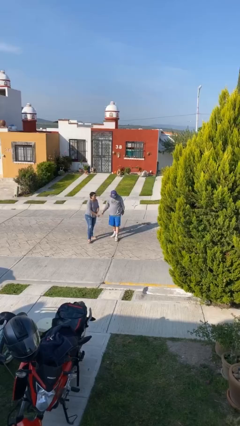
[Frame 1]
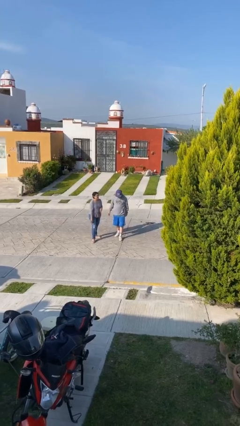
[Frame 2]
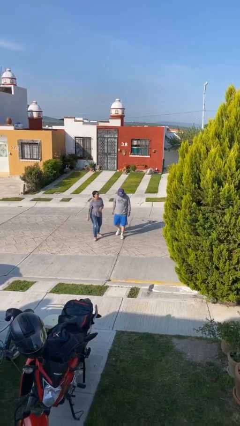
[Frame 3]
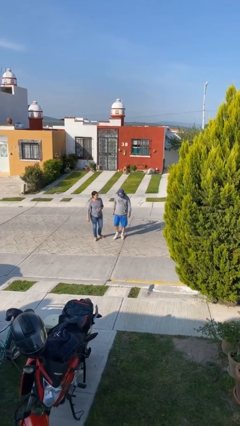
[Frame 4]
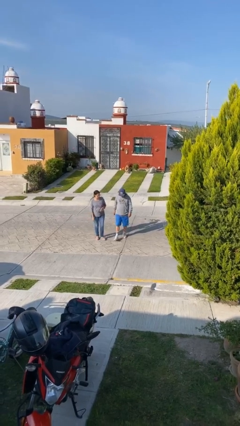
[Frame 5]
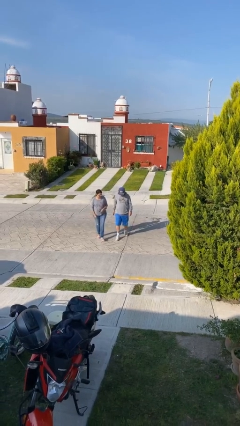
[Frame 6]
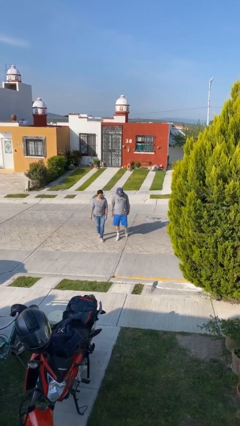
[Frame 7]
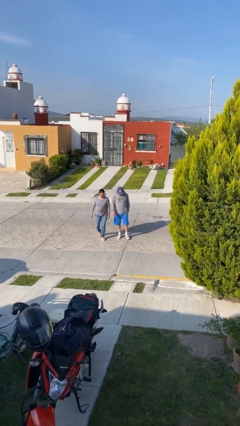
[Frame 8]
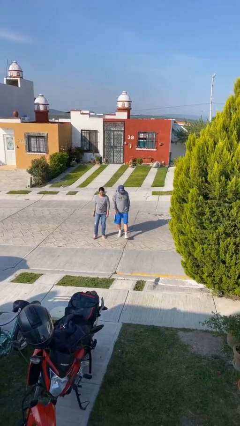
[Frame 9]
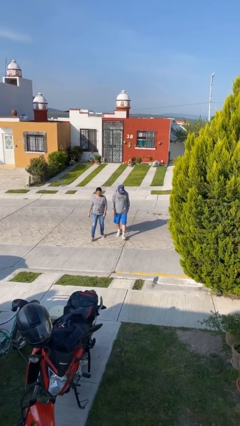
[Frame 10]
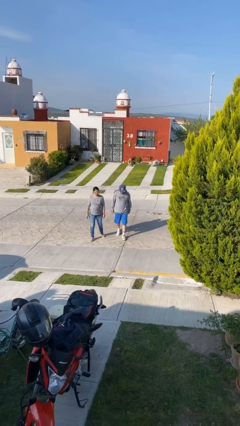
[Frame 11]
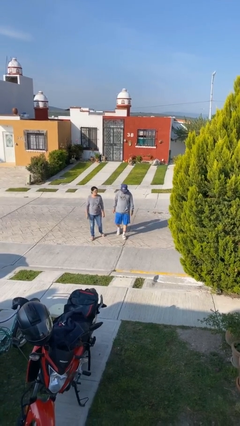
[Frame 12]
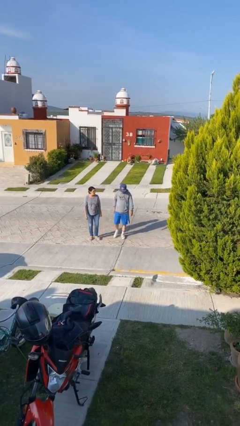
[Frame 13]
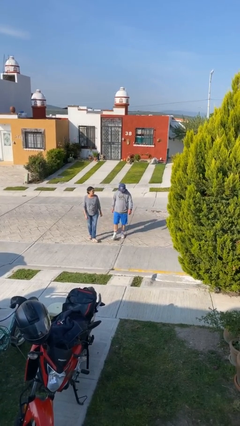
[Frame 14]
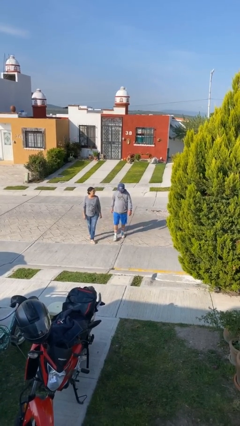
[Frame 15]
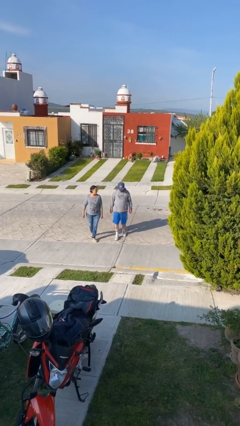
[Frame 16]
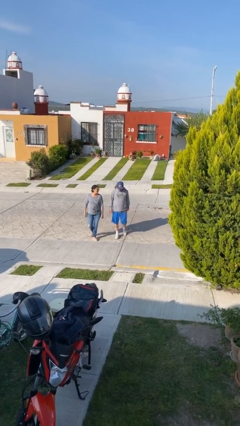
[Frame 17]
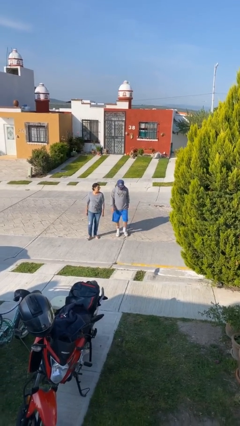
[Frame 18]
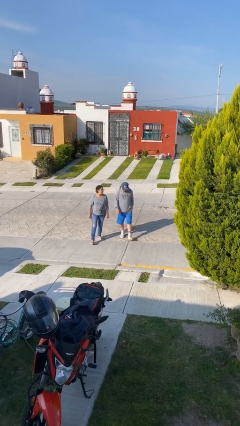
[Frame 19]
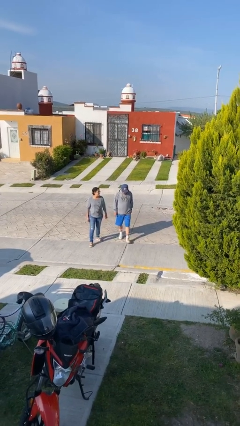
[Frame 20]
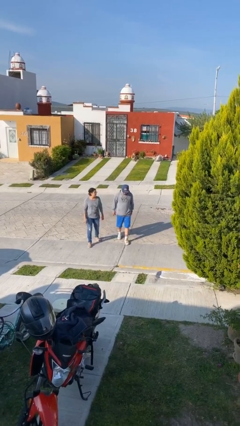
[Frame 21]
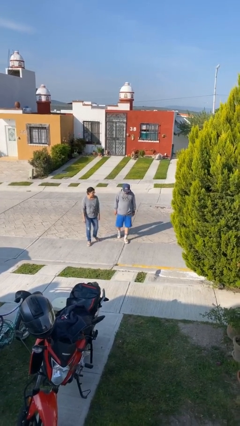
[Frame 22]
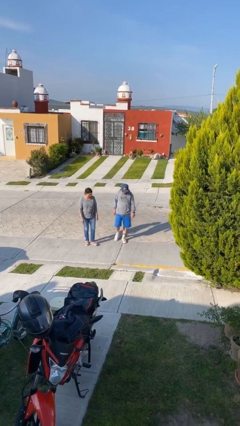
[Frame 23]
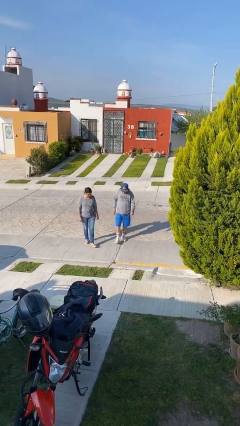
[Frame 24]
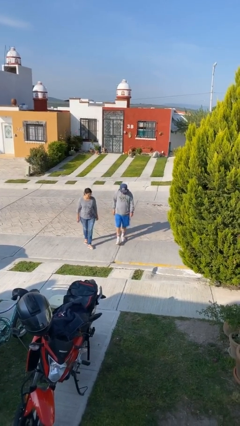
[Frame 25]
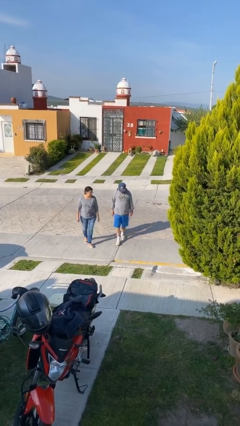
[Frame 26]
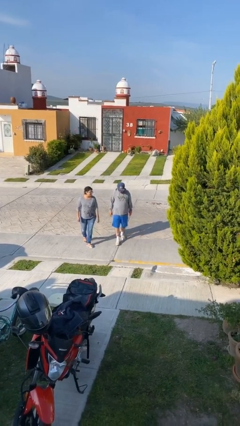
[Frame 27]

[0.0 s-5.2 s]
person talks to person

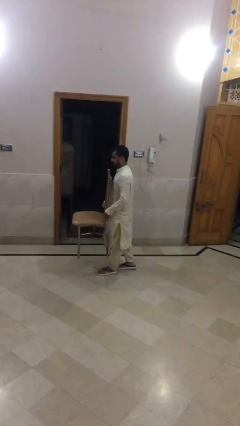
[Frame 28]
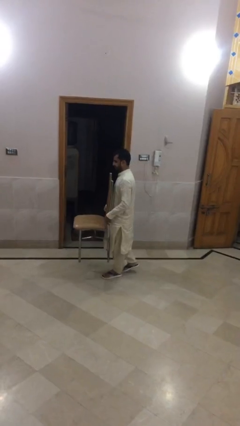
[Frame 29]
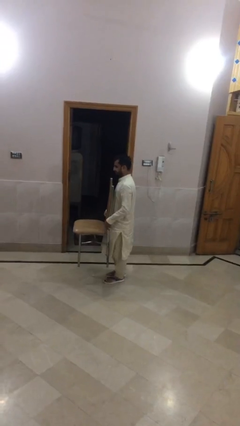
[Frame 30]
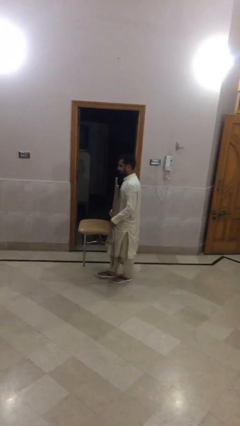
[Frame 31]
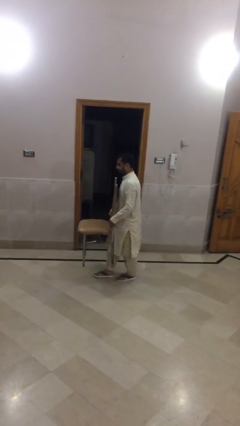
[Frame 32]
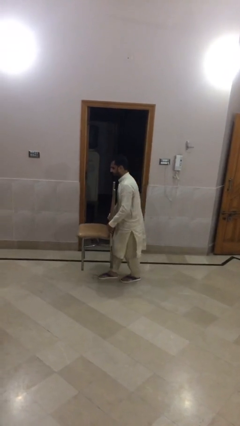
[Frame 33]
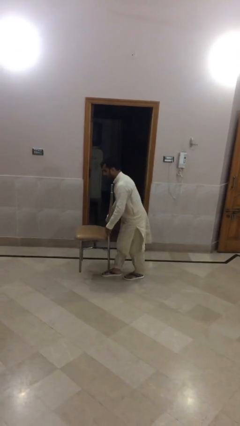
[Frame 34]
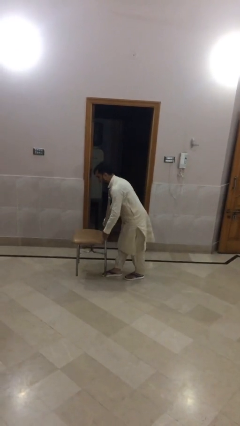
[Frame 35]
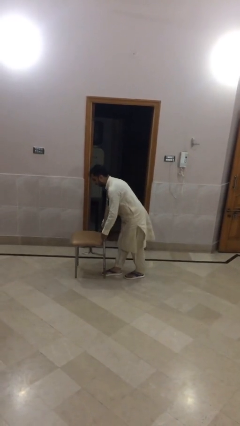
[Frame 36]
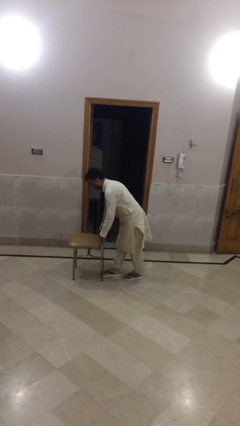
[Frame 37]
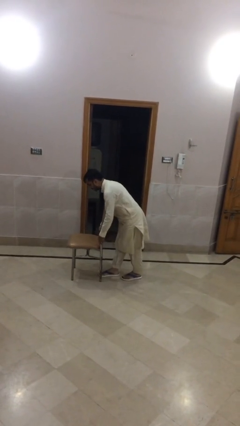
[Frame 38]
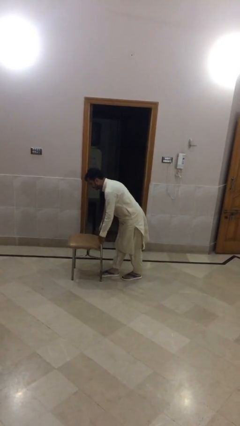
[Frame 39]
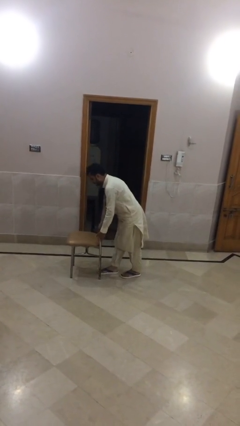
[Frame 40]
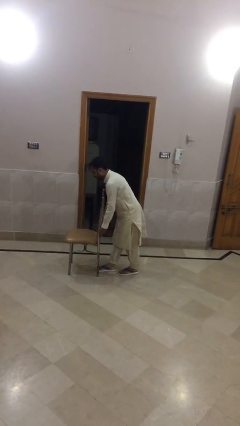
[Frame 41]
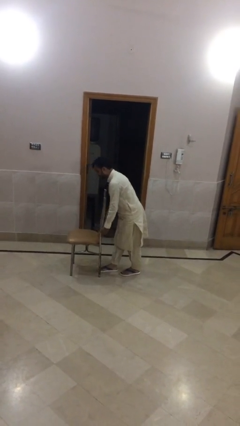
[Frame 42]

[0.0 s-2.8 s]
person puts down object on floor

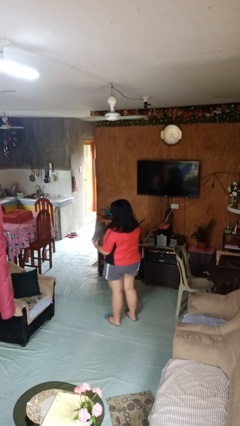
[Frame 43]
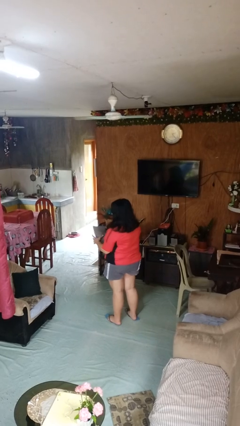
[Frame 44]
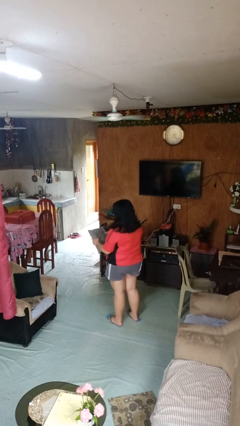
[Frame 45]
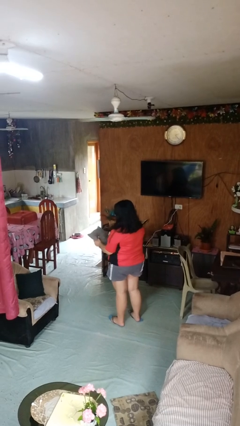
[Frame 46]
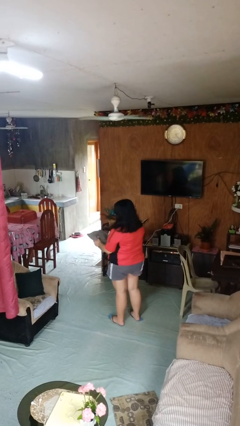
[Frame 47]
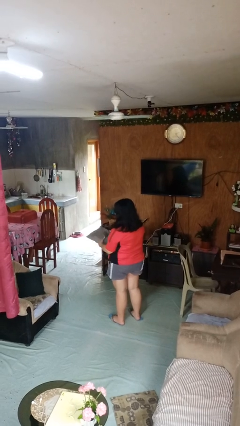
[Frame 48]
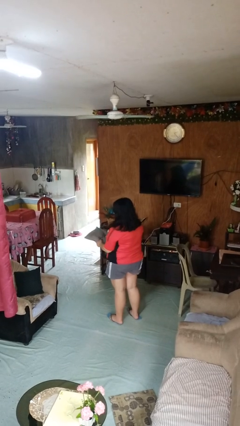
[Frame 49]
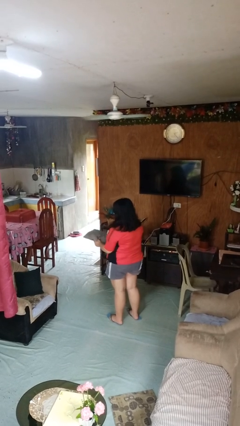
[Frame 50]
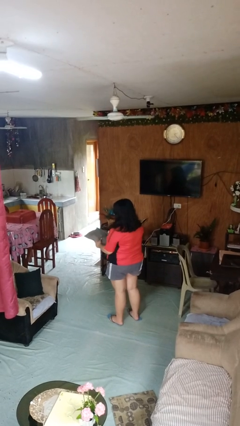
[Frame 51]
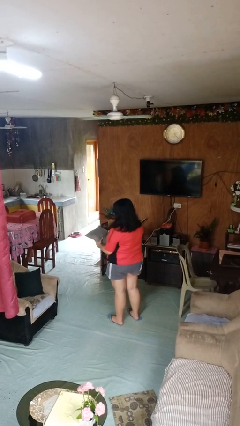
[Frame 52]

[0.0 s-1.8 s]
person squeezes object

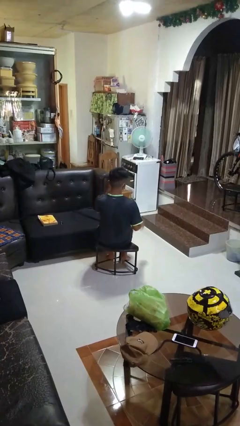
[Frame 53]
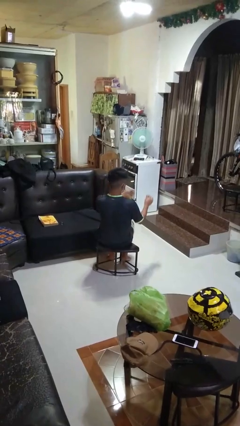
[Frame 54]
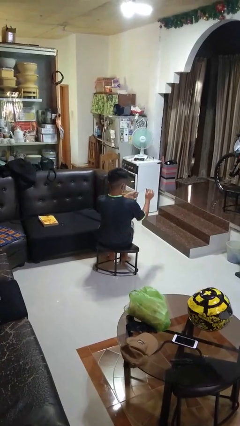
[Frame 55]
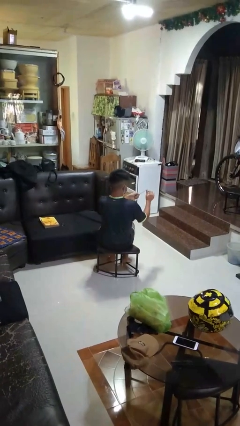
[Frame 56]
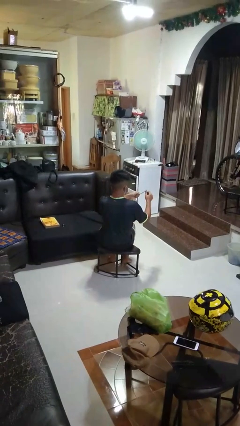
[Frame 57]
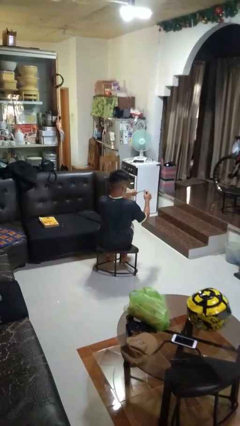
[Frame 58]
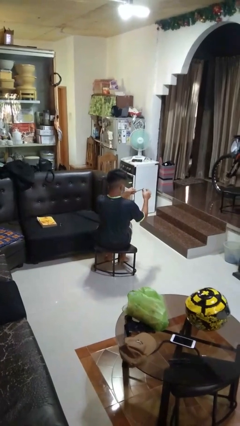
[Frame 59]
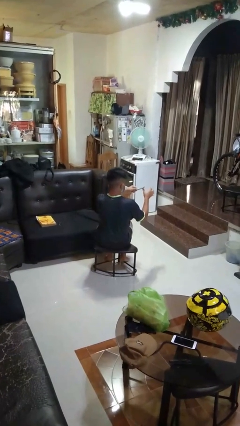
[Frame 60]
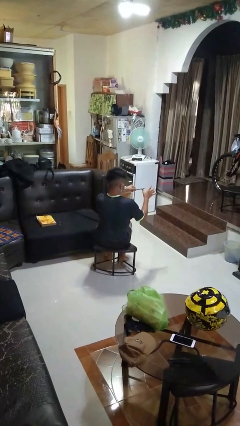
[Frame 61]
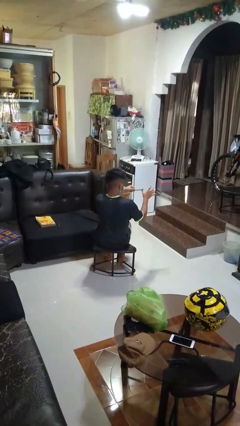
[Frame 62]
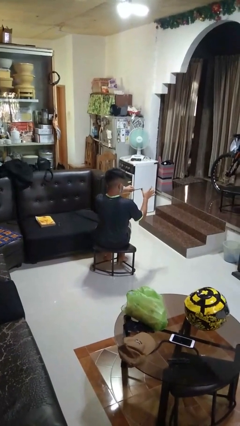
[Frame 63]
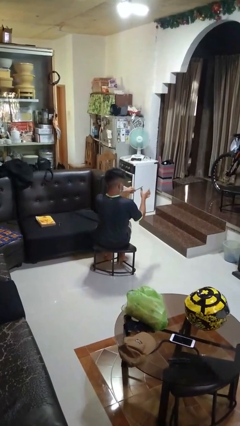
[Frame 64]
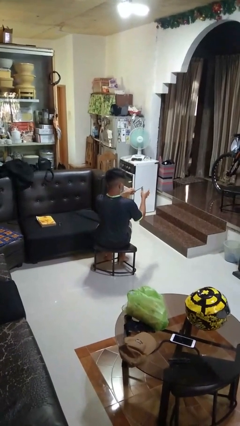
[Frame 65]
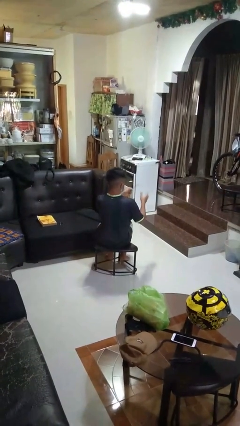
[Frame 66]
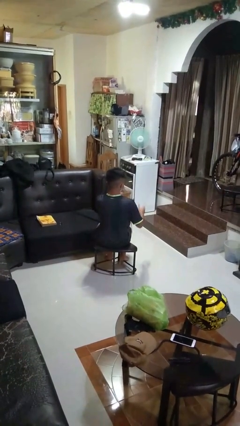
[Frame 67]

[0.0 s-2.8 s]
person files fingernails

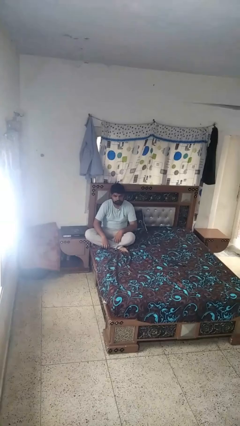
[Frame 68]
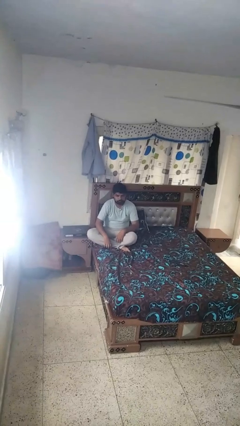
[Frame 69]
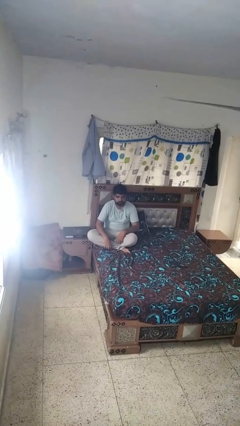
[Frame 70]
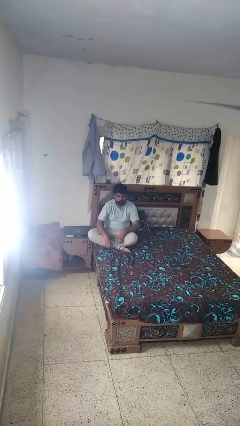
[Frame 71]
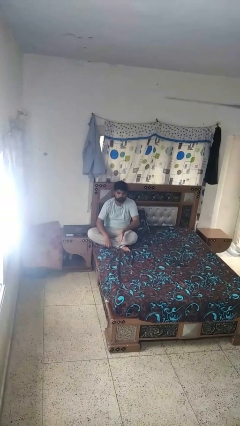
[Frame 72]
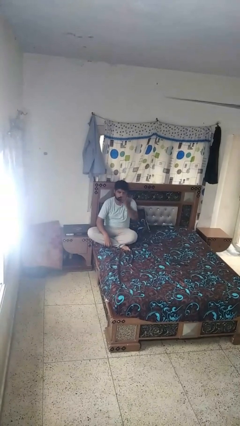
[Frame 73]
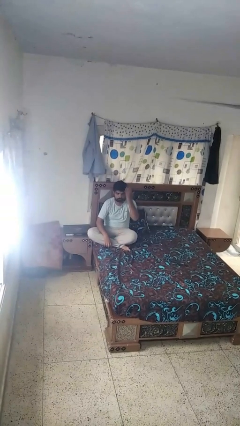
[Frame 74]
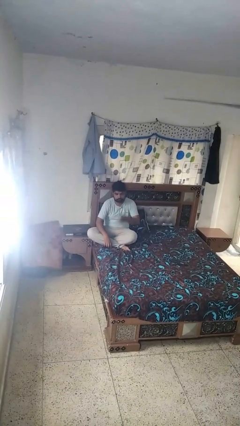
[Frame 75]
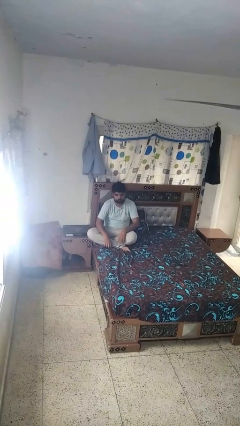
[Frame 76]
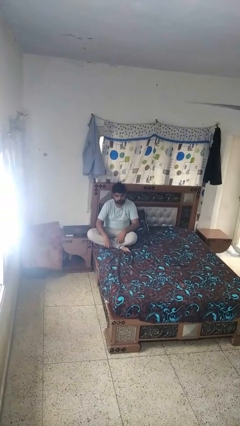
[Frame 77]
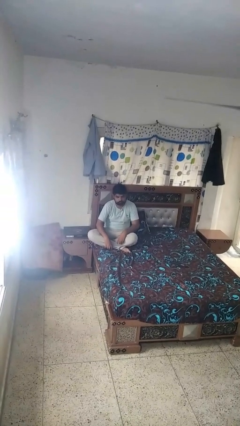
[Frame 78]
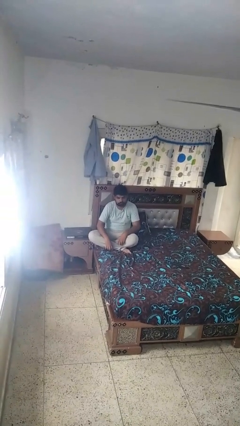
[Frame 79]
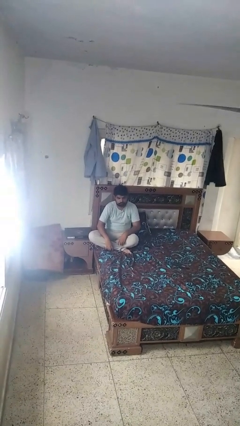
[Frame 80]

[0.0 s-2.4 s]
person gestures swipe up

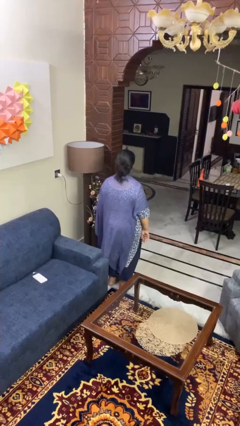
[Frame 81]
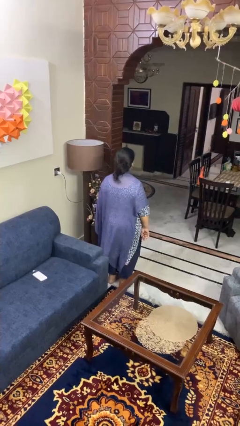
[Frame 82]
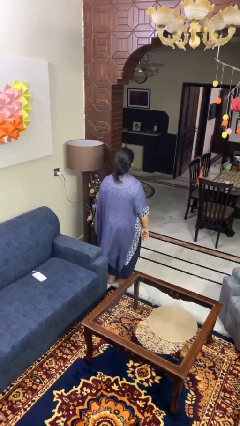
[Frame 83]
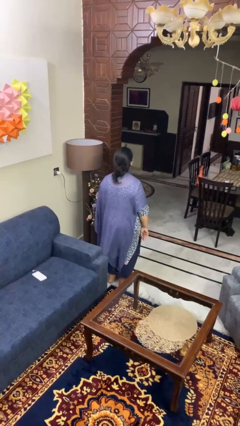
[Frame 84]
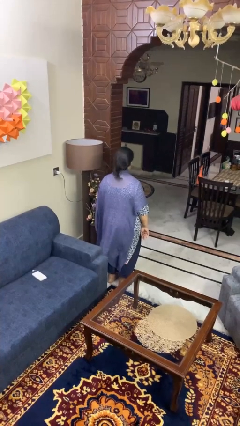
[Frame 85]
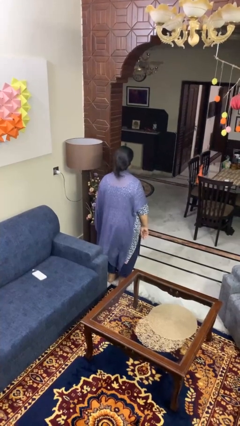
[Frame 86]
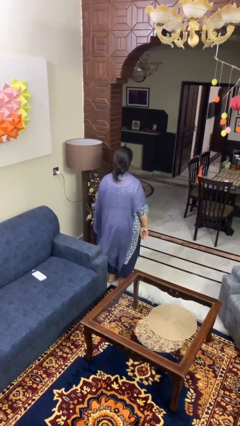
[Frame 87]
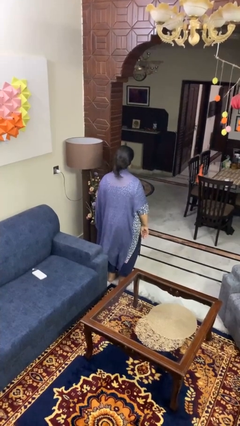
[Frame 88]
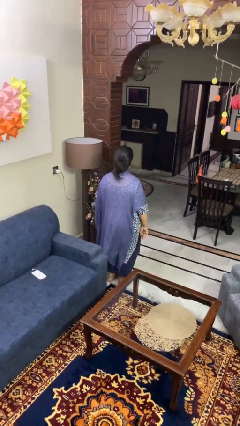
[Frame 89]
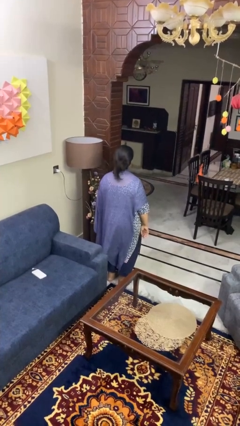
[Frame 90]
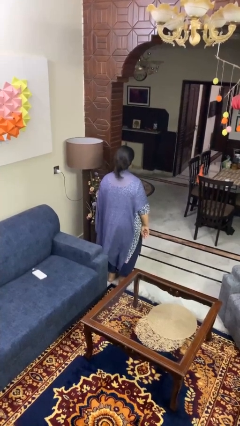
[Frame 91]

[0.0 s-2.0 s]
person nods head

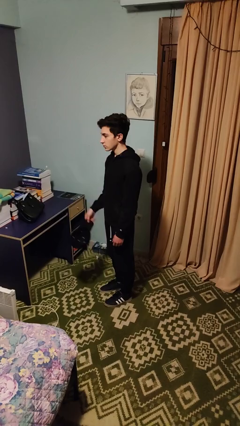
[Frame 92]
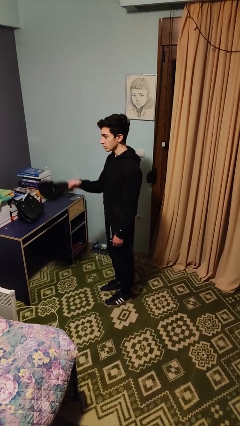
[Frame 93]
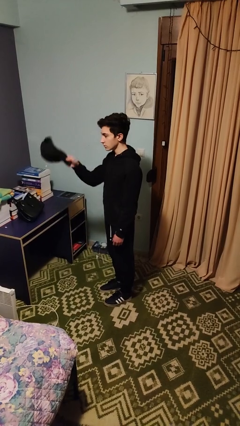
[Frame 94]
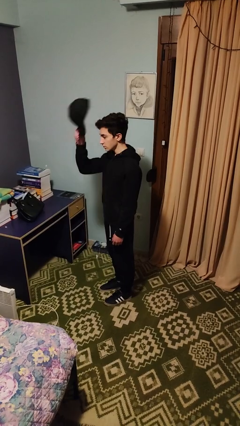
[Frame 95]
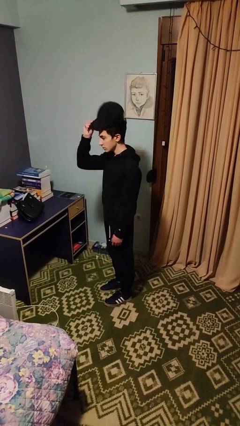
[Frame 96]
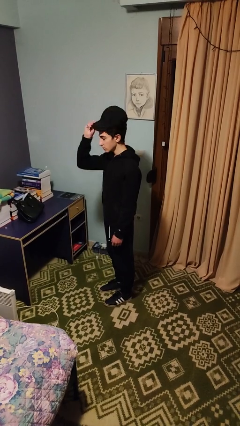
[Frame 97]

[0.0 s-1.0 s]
person puts on hat
